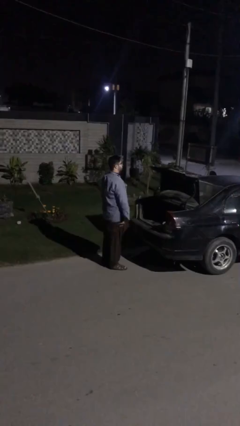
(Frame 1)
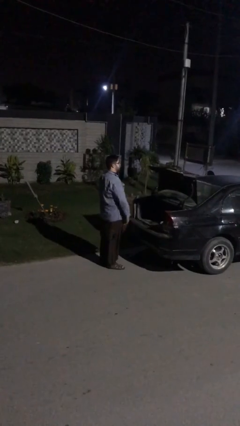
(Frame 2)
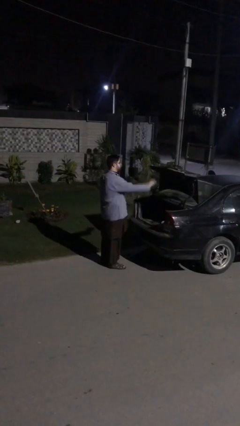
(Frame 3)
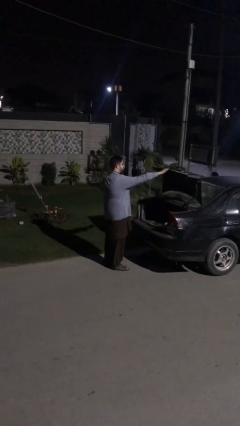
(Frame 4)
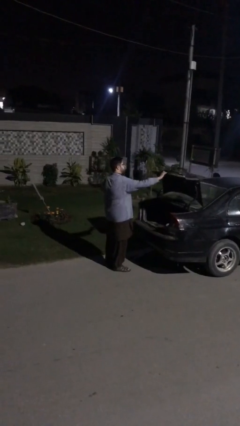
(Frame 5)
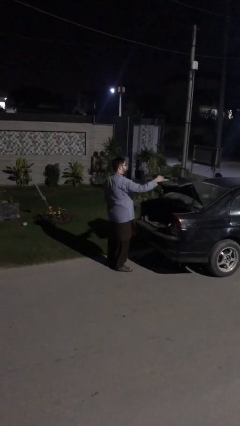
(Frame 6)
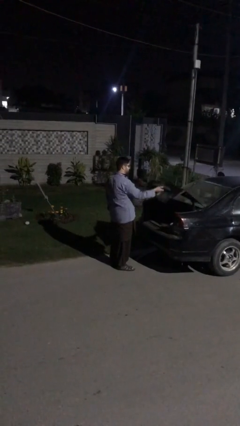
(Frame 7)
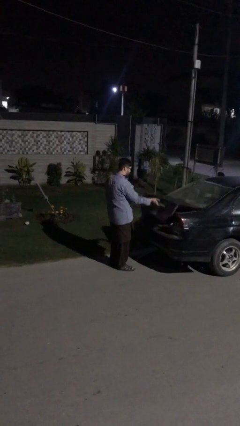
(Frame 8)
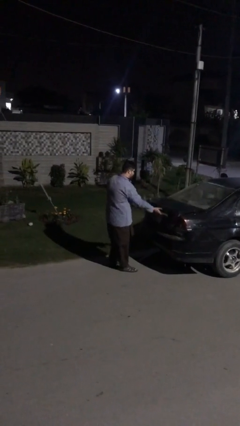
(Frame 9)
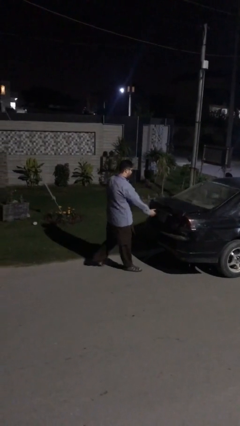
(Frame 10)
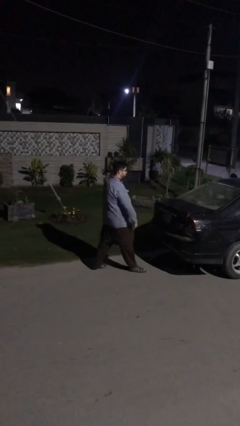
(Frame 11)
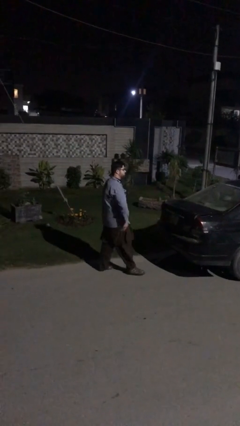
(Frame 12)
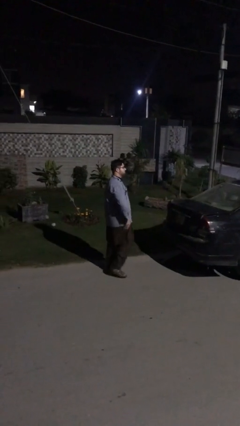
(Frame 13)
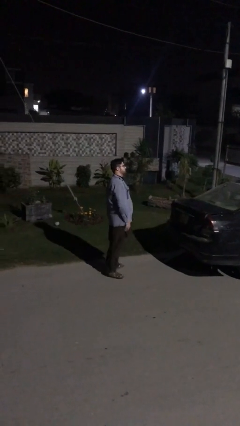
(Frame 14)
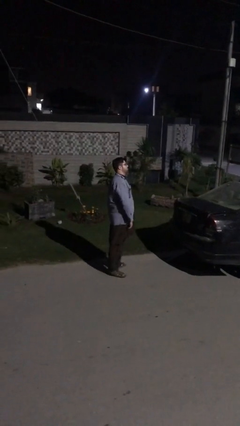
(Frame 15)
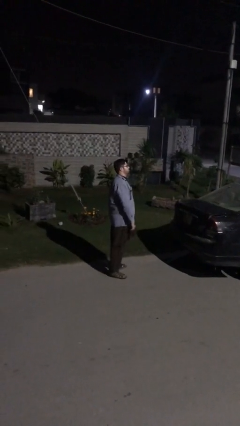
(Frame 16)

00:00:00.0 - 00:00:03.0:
person closes car trunk

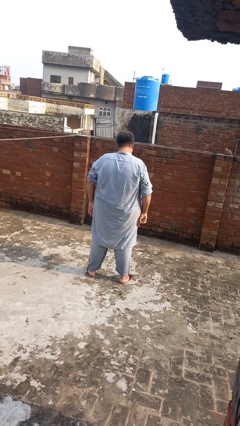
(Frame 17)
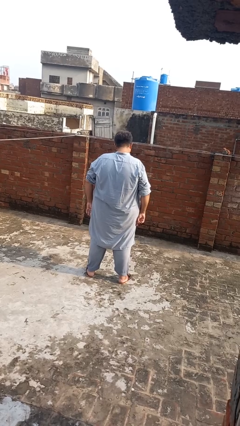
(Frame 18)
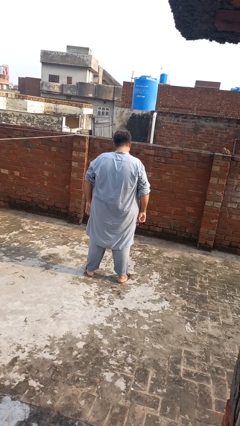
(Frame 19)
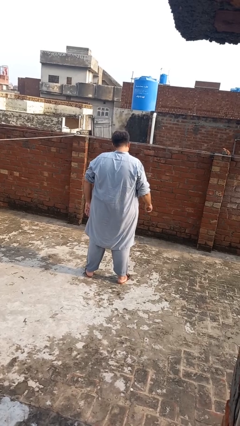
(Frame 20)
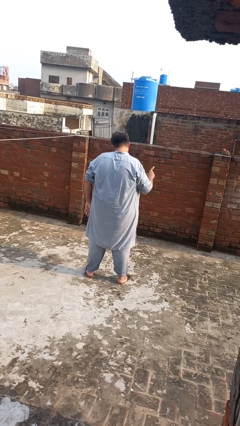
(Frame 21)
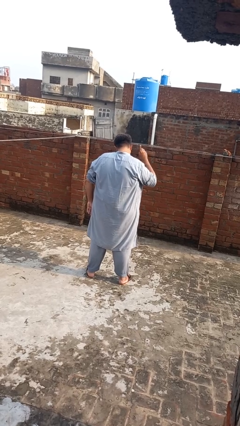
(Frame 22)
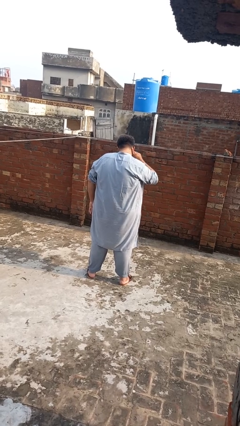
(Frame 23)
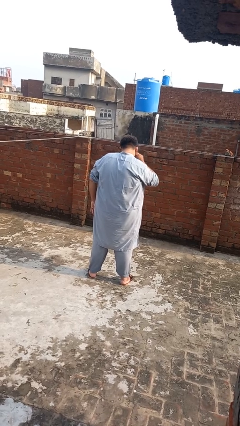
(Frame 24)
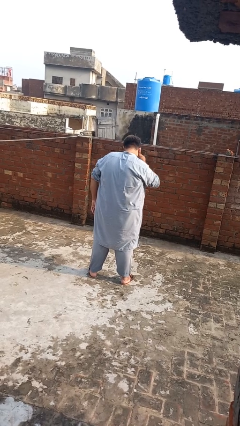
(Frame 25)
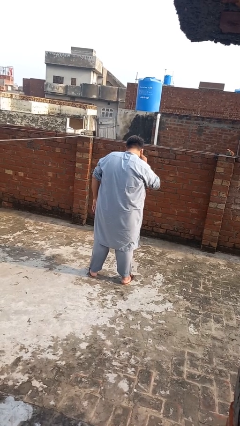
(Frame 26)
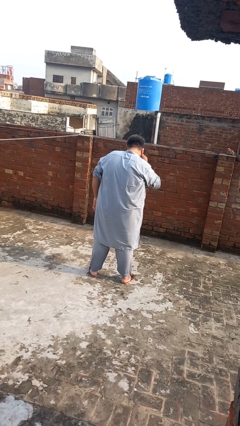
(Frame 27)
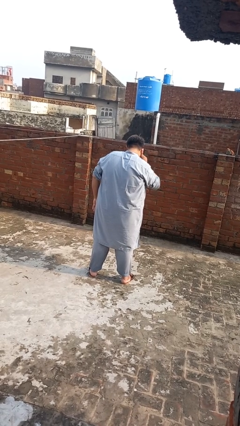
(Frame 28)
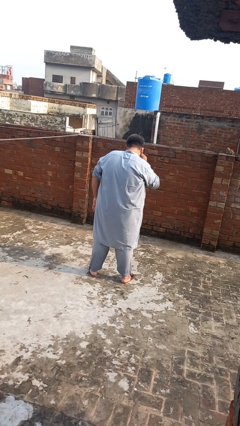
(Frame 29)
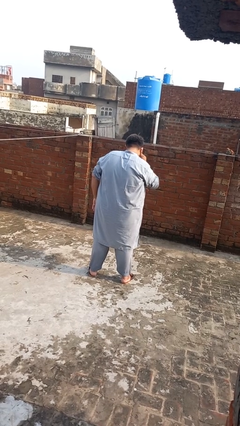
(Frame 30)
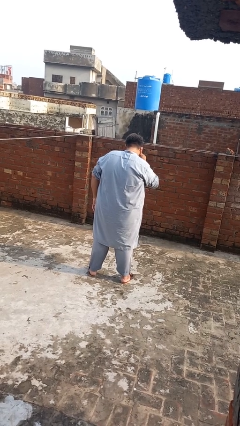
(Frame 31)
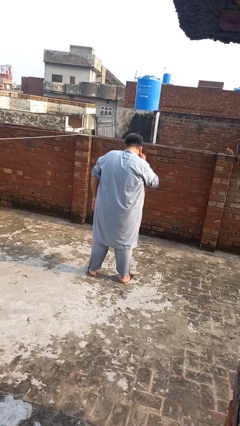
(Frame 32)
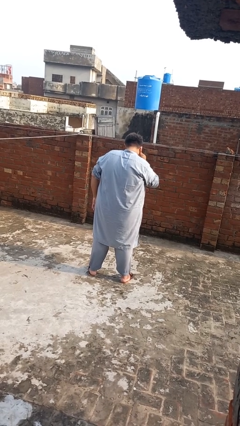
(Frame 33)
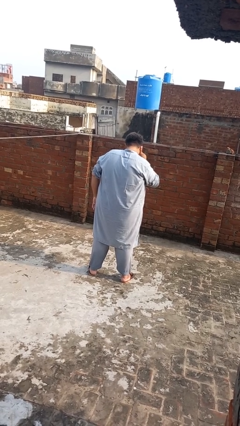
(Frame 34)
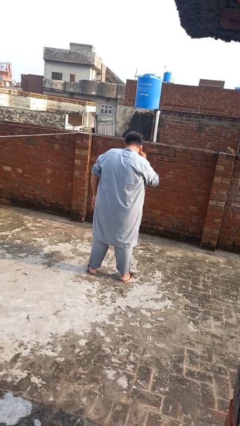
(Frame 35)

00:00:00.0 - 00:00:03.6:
person gestures listen closely

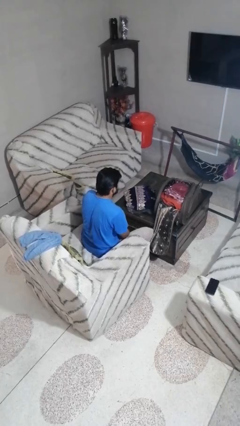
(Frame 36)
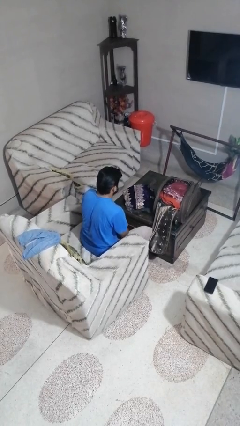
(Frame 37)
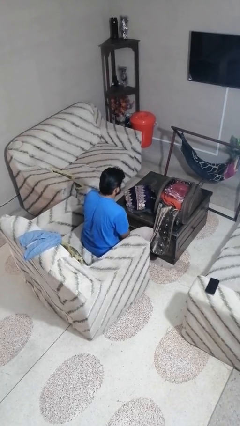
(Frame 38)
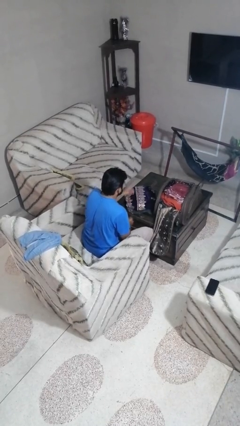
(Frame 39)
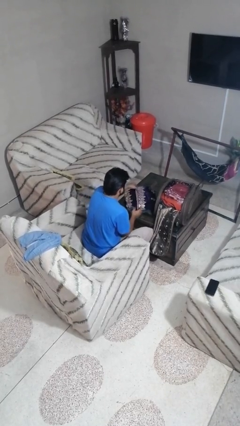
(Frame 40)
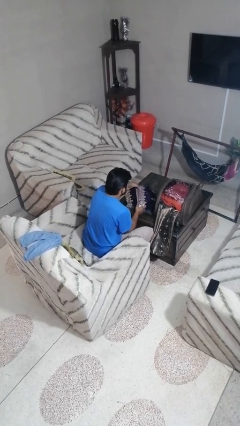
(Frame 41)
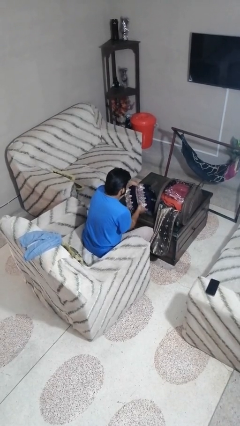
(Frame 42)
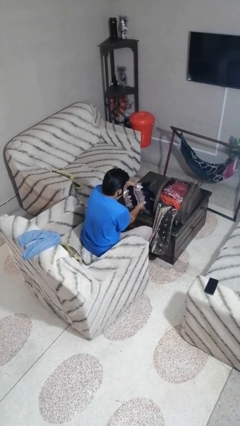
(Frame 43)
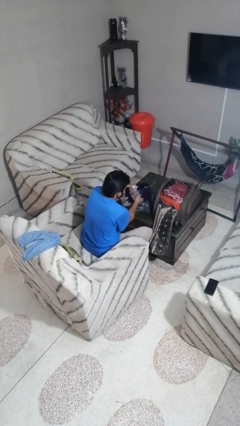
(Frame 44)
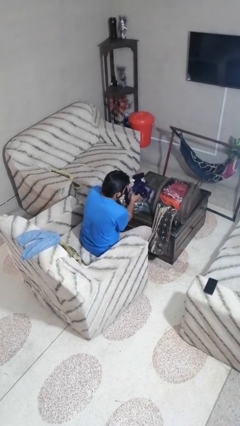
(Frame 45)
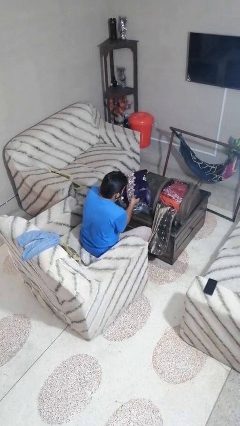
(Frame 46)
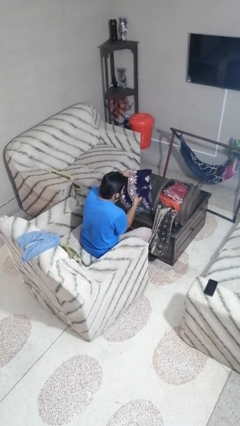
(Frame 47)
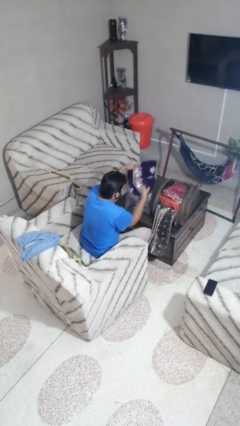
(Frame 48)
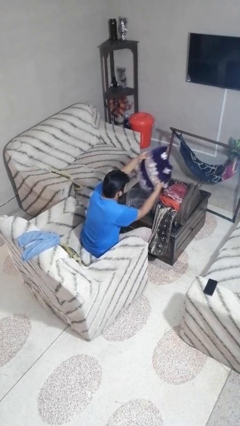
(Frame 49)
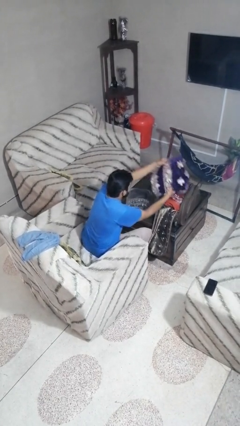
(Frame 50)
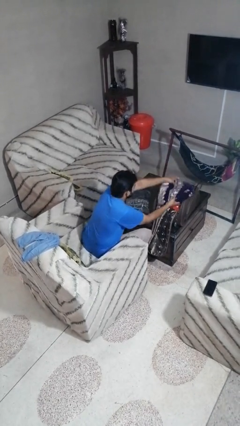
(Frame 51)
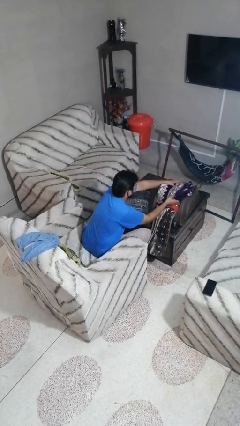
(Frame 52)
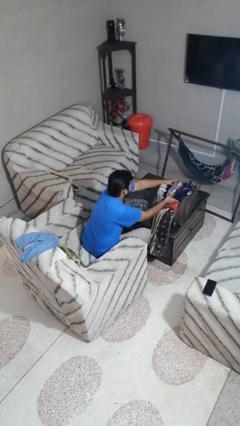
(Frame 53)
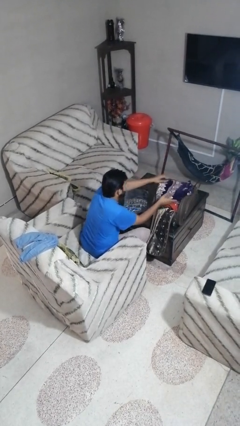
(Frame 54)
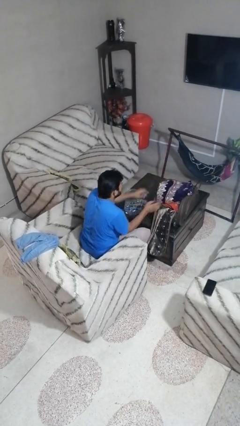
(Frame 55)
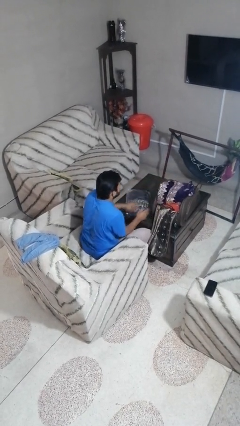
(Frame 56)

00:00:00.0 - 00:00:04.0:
person loads clothes into suitcase

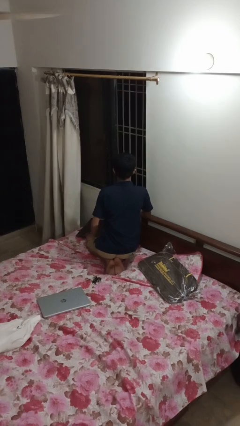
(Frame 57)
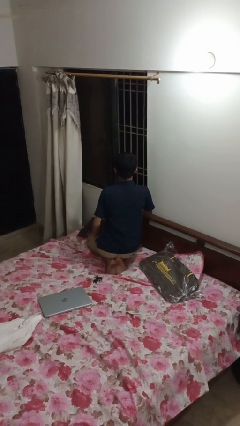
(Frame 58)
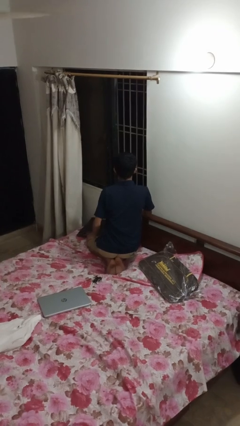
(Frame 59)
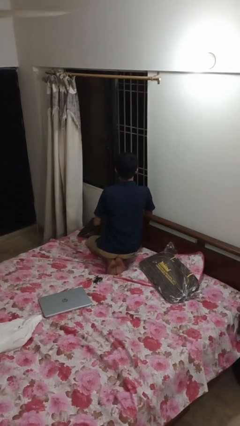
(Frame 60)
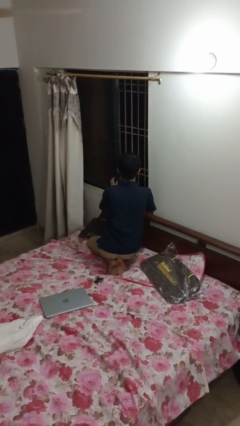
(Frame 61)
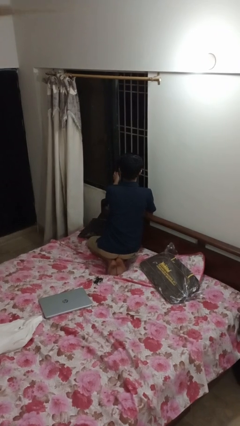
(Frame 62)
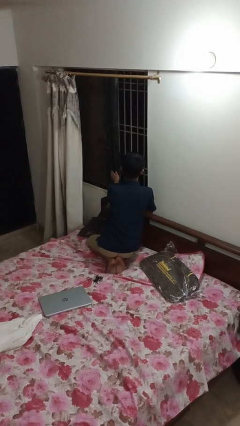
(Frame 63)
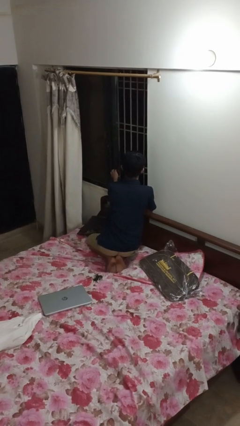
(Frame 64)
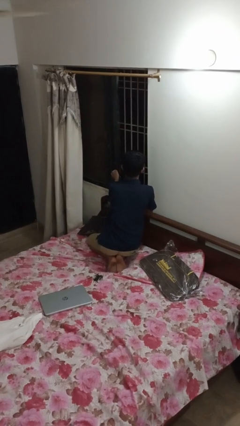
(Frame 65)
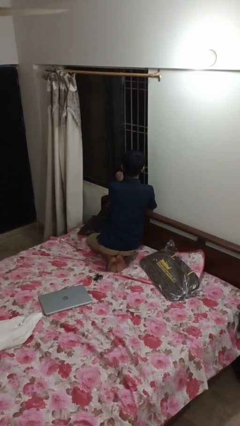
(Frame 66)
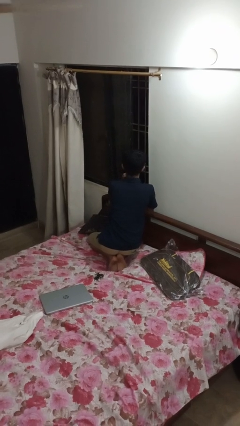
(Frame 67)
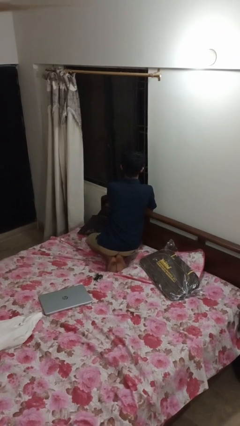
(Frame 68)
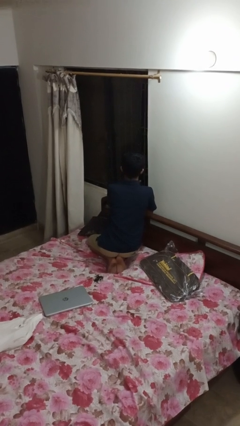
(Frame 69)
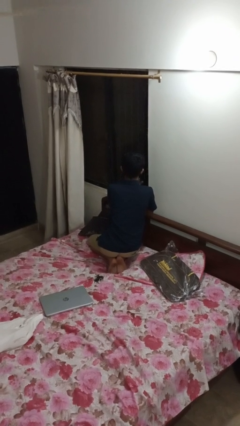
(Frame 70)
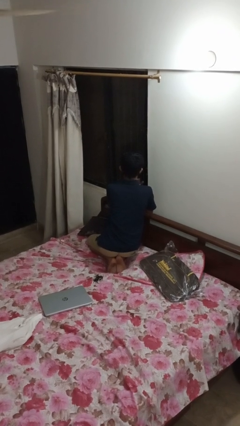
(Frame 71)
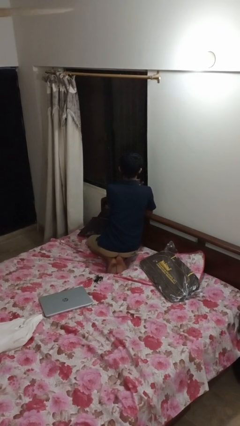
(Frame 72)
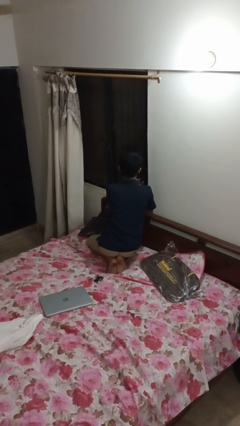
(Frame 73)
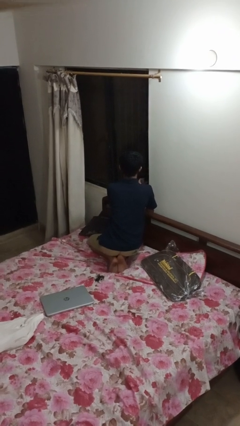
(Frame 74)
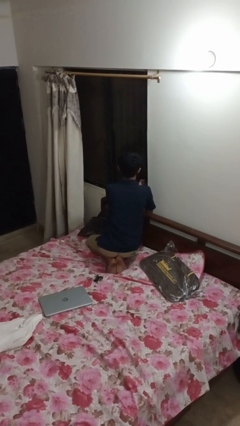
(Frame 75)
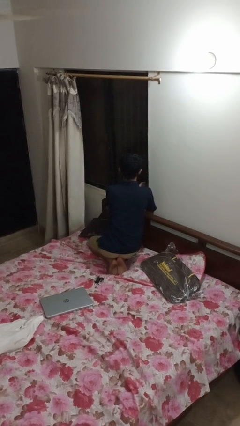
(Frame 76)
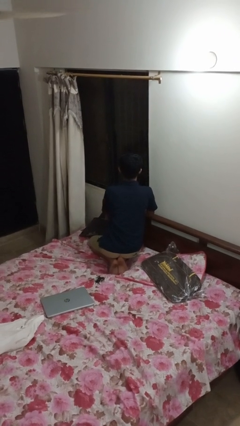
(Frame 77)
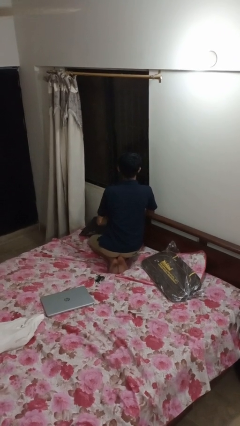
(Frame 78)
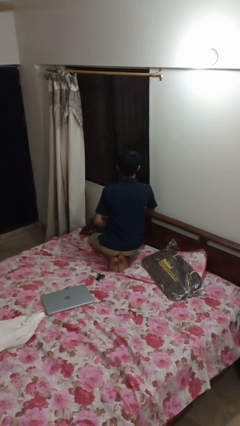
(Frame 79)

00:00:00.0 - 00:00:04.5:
person closes home window

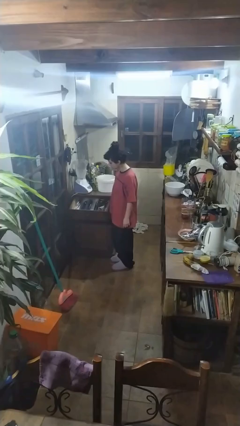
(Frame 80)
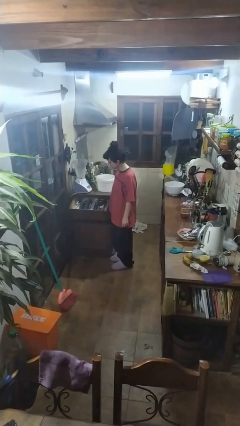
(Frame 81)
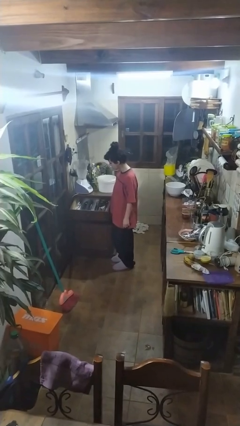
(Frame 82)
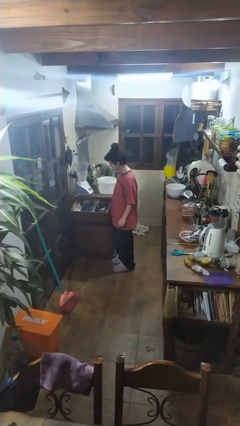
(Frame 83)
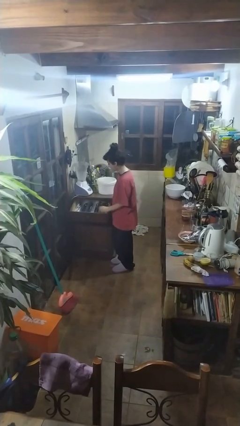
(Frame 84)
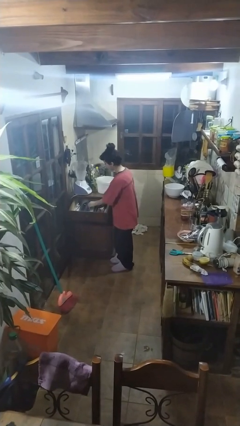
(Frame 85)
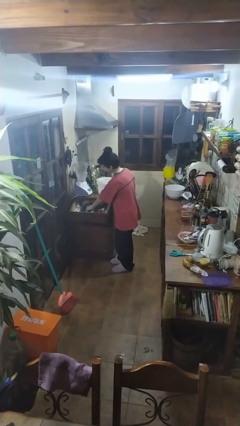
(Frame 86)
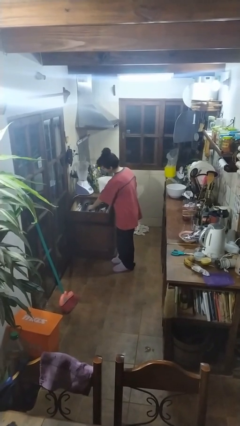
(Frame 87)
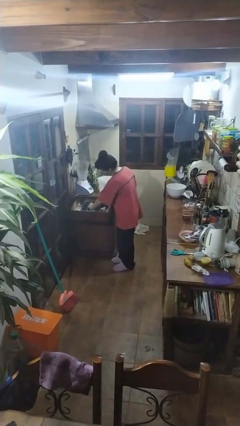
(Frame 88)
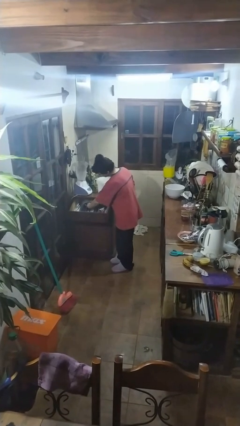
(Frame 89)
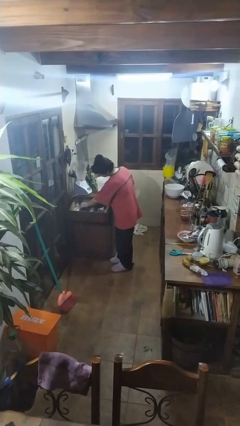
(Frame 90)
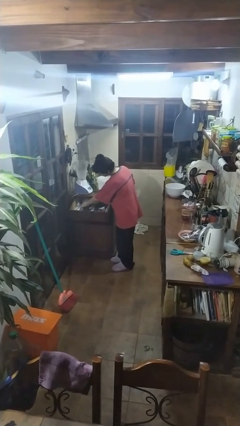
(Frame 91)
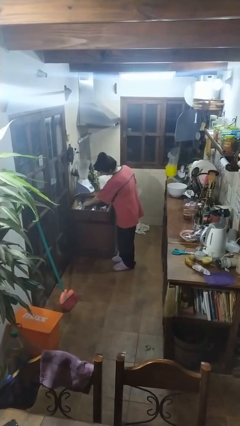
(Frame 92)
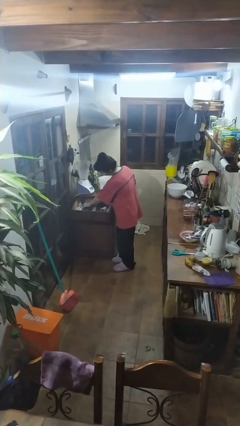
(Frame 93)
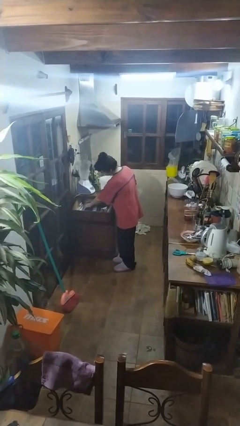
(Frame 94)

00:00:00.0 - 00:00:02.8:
person searches in kitchen drawer
